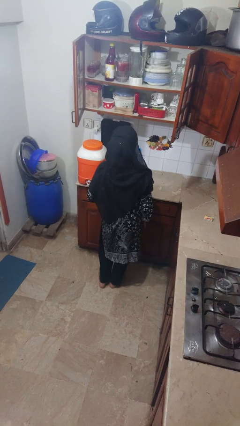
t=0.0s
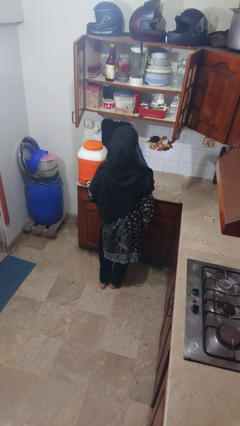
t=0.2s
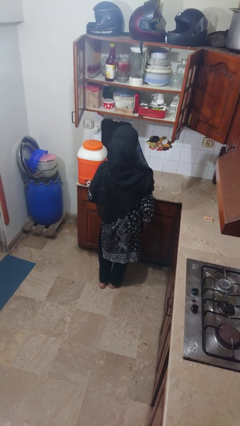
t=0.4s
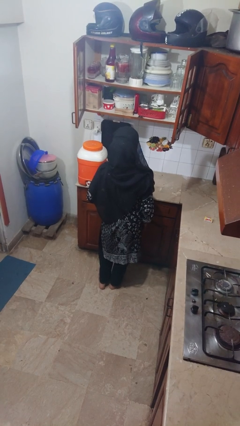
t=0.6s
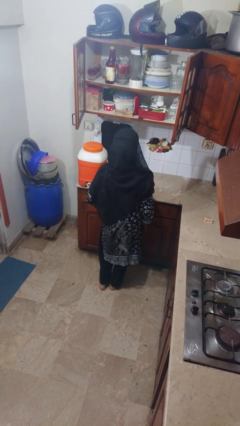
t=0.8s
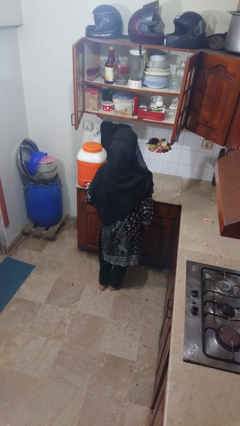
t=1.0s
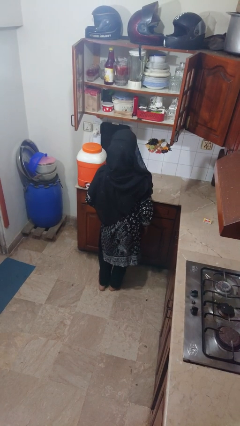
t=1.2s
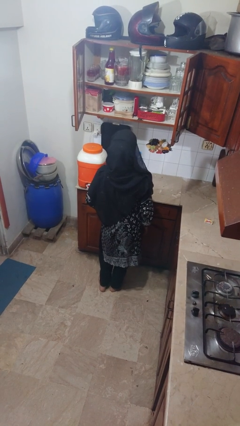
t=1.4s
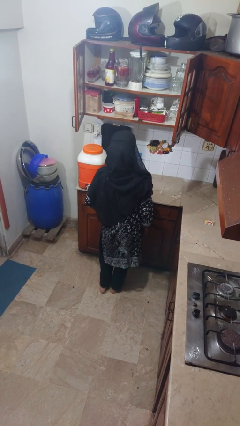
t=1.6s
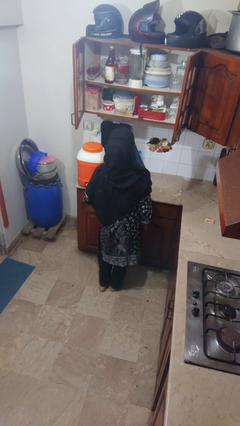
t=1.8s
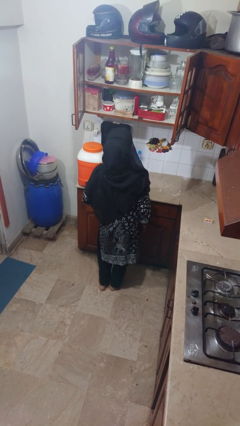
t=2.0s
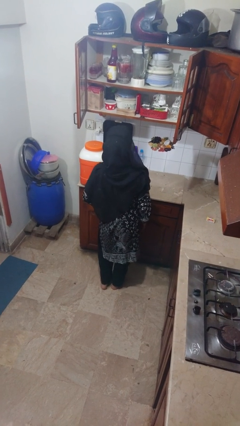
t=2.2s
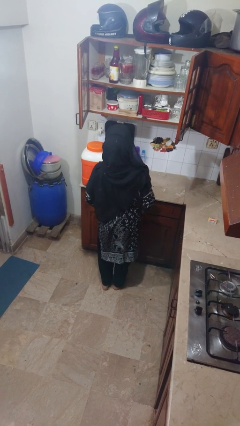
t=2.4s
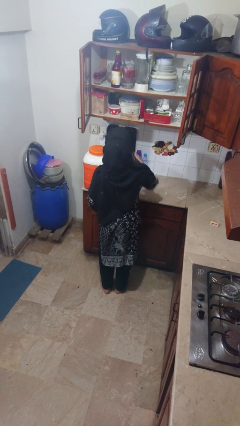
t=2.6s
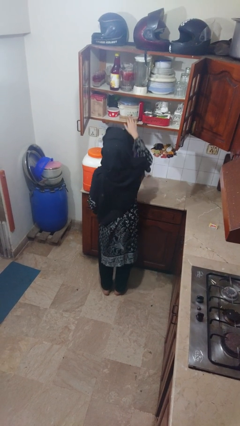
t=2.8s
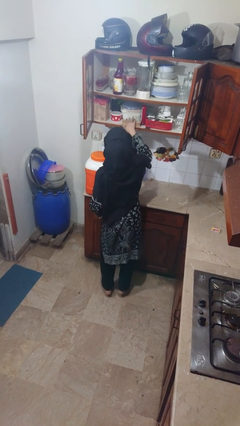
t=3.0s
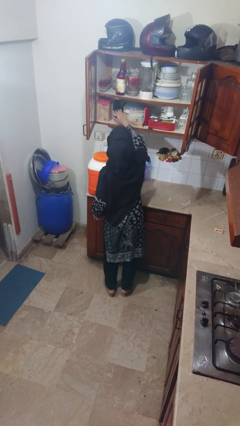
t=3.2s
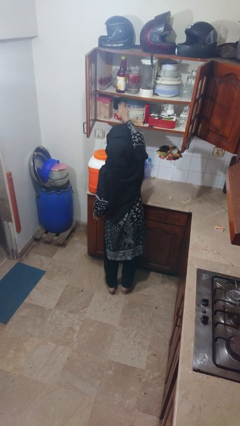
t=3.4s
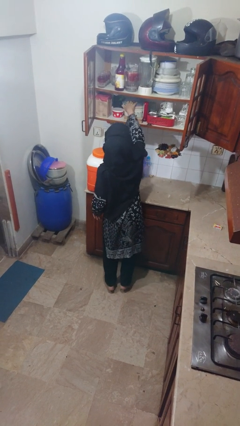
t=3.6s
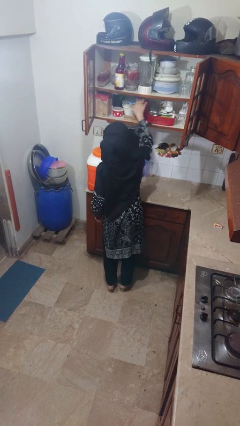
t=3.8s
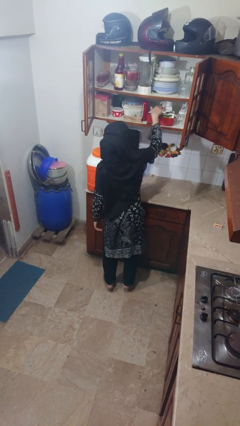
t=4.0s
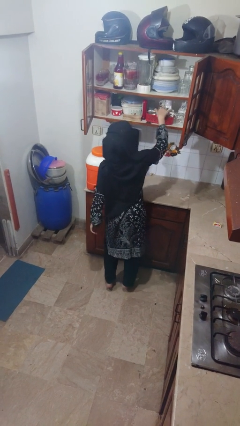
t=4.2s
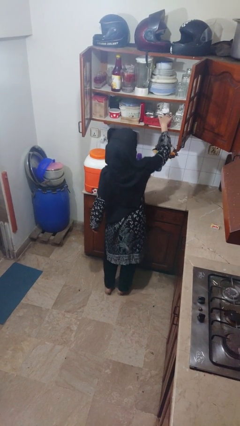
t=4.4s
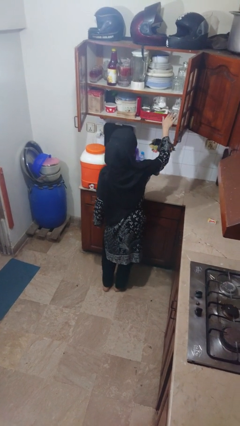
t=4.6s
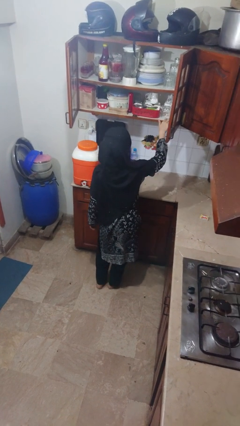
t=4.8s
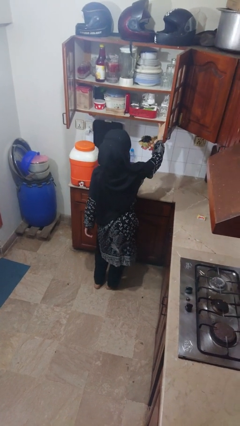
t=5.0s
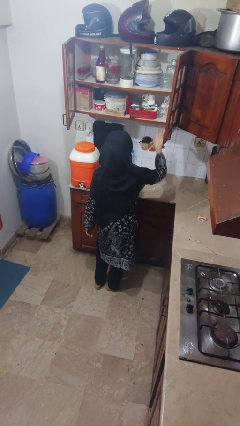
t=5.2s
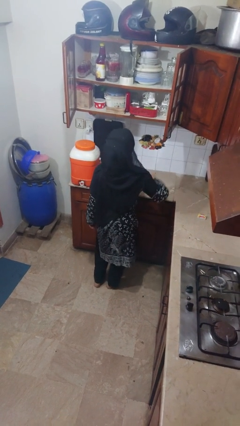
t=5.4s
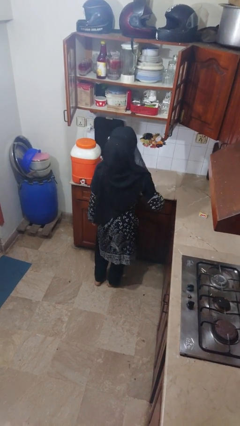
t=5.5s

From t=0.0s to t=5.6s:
person searches in cabinet

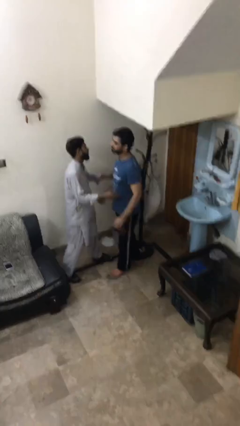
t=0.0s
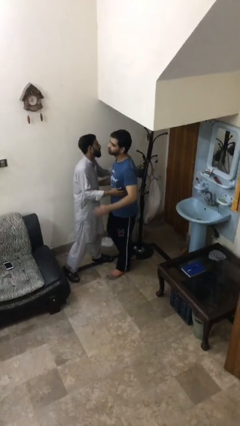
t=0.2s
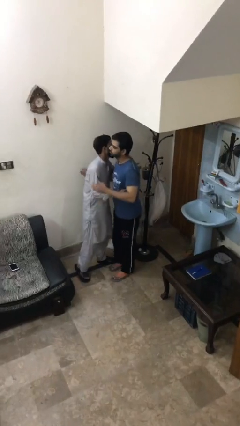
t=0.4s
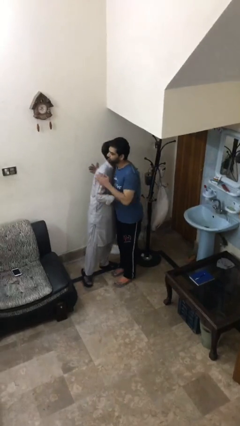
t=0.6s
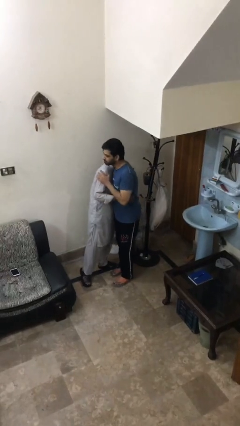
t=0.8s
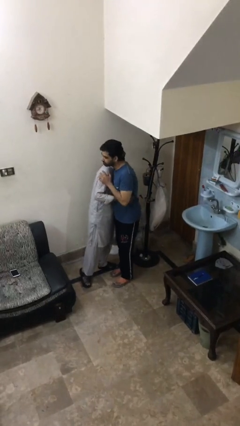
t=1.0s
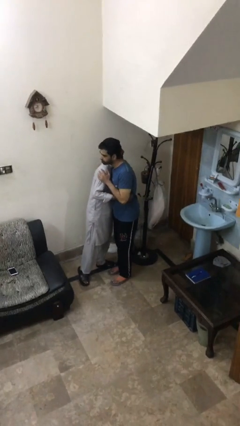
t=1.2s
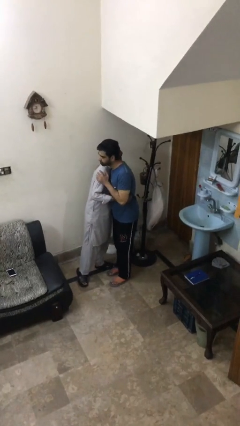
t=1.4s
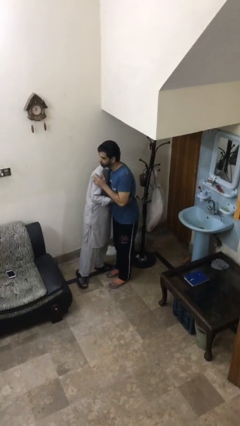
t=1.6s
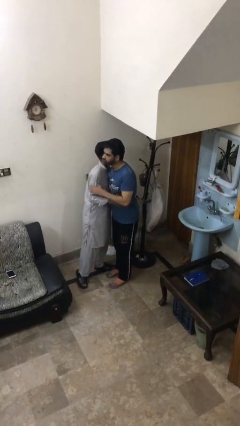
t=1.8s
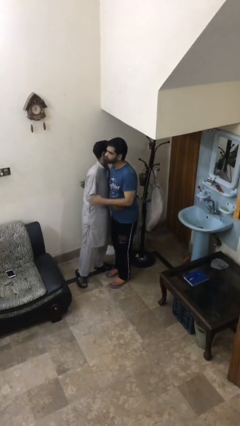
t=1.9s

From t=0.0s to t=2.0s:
person embraces person

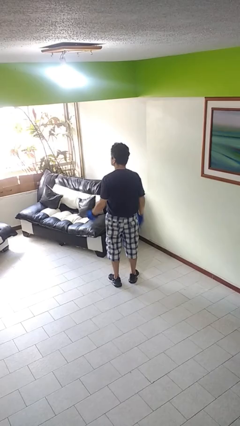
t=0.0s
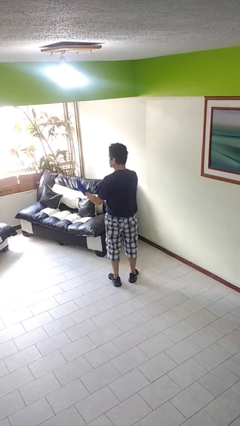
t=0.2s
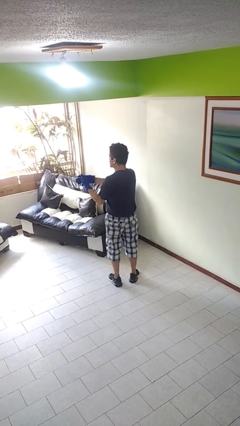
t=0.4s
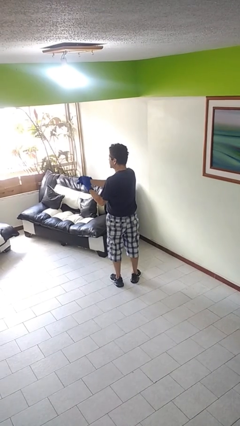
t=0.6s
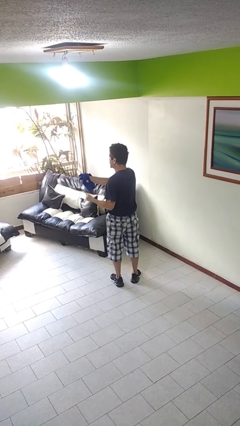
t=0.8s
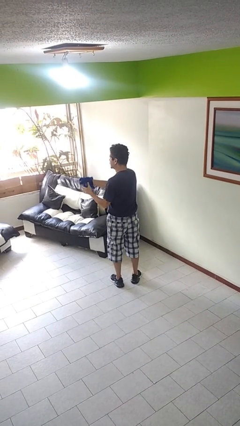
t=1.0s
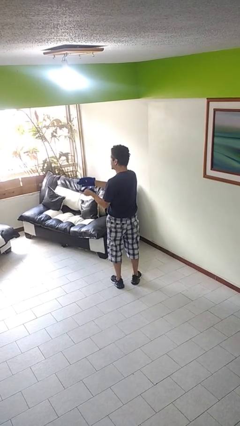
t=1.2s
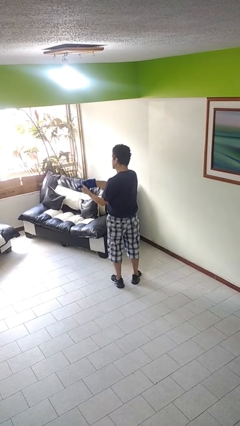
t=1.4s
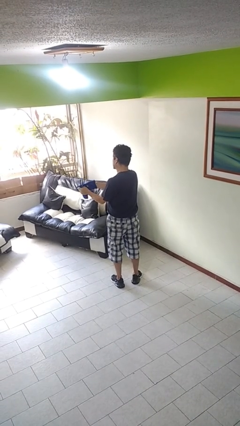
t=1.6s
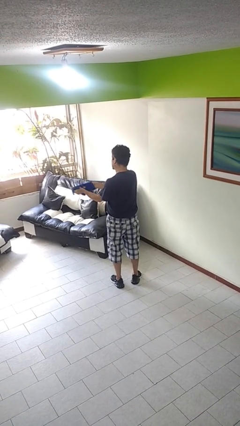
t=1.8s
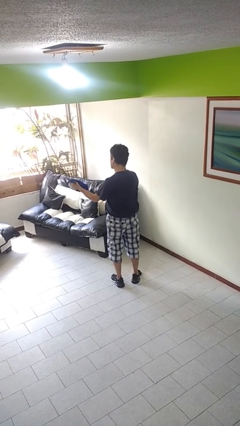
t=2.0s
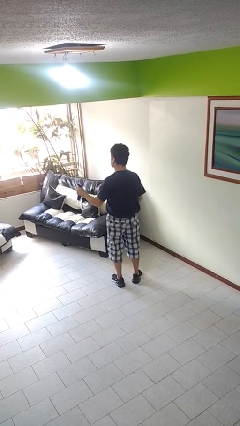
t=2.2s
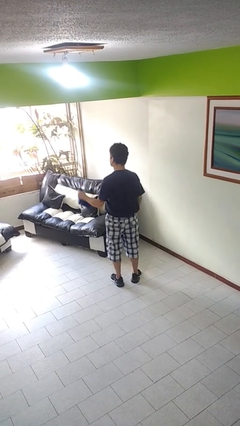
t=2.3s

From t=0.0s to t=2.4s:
person takes off gloves

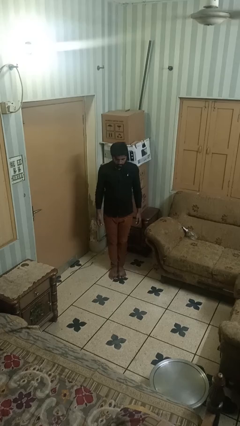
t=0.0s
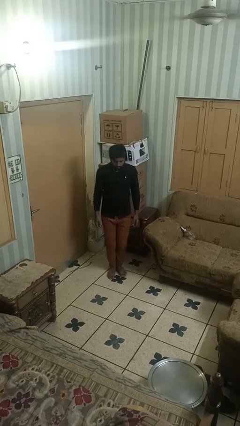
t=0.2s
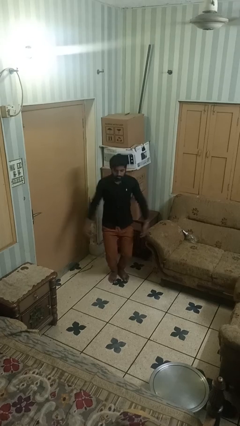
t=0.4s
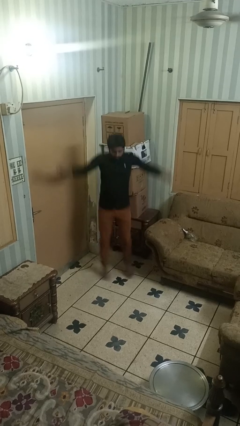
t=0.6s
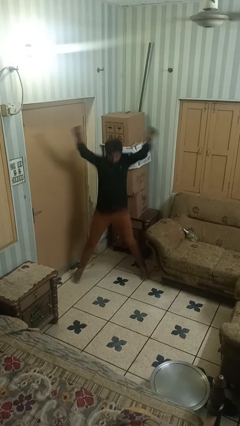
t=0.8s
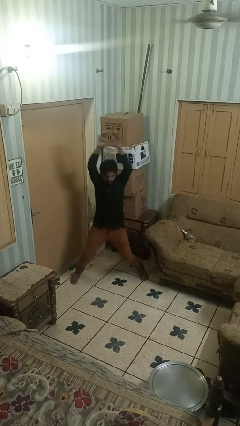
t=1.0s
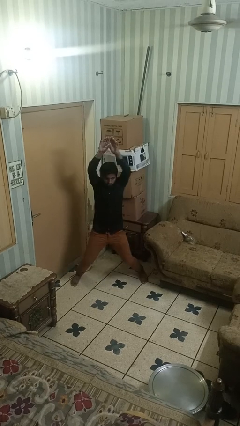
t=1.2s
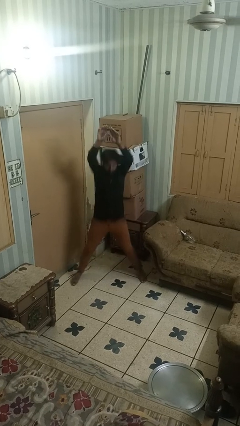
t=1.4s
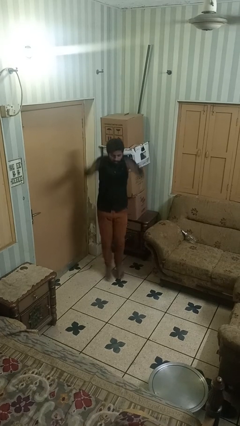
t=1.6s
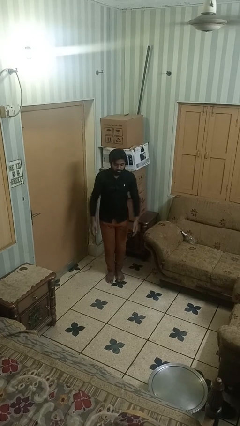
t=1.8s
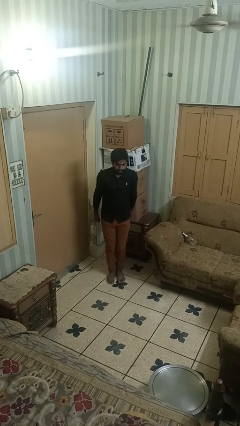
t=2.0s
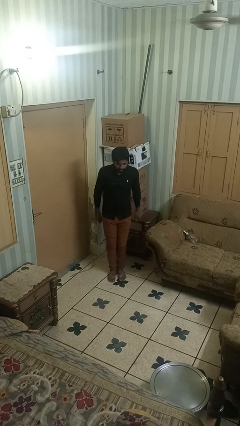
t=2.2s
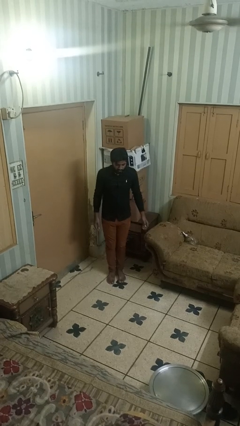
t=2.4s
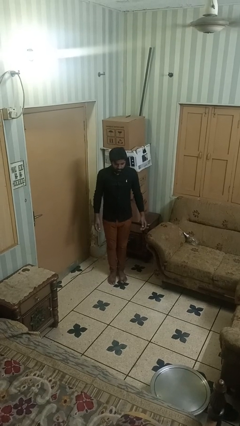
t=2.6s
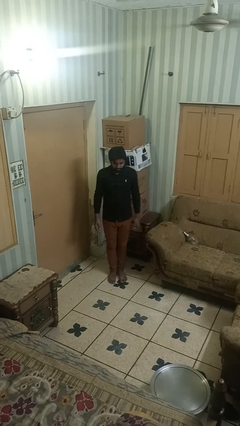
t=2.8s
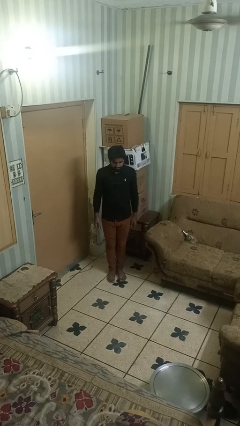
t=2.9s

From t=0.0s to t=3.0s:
person exercises with jumping jacks

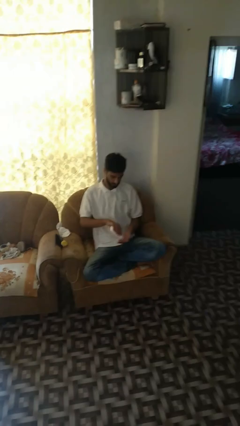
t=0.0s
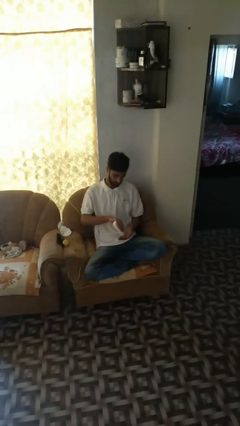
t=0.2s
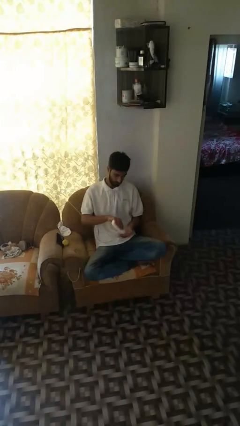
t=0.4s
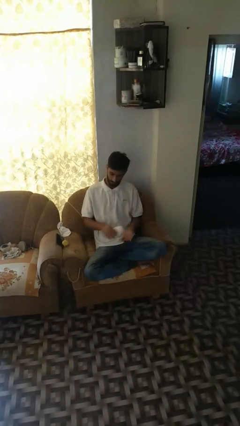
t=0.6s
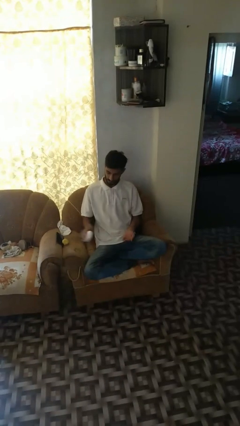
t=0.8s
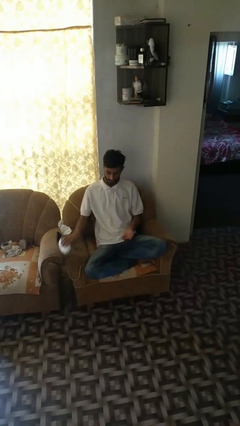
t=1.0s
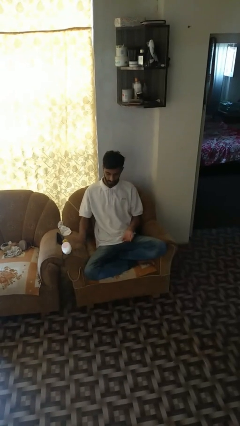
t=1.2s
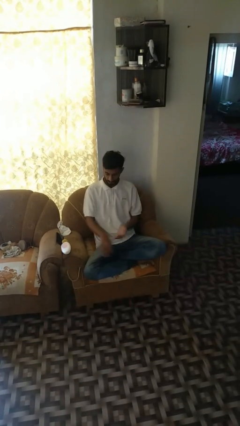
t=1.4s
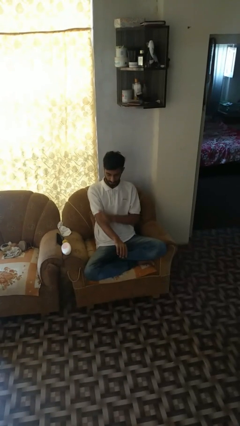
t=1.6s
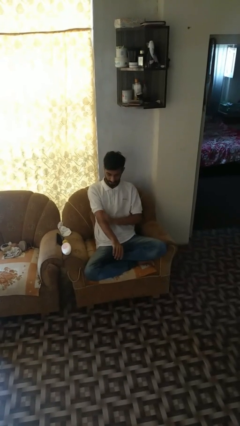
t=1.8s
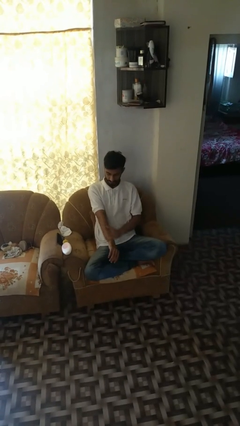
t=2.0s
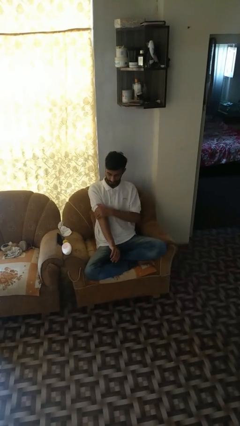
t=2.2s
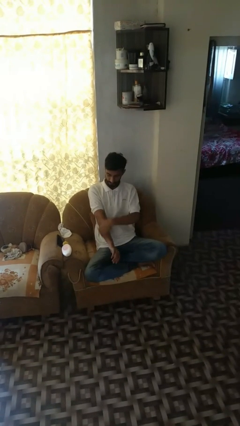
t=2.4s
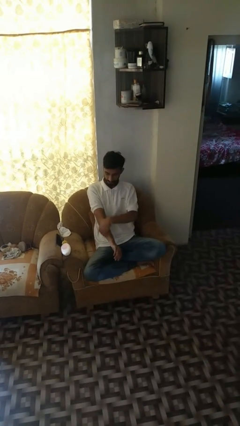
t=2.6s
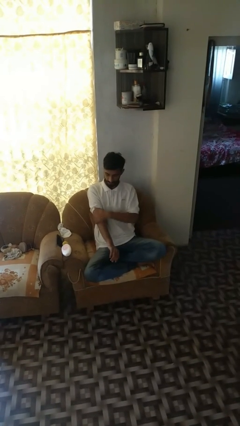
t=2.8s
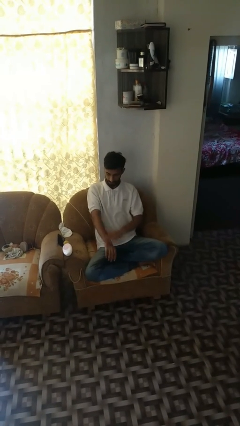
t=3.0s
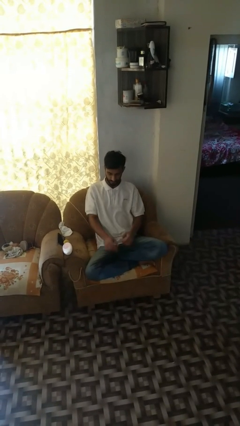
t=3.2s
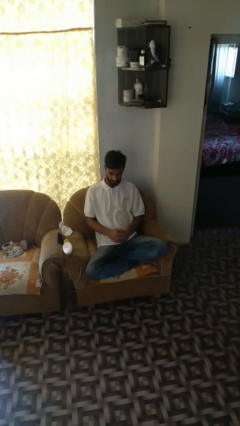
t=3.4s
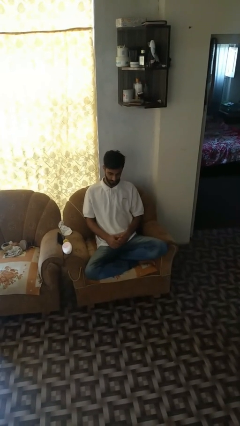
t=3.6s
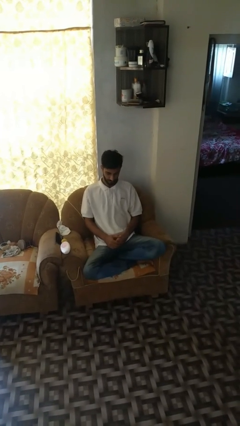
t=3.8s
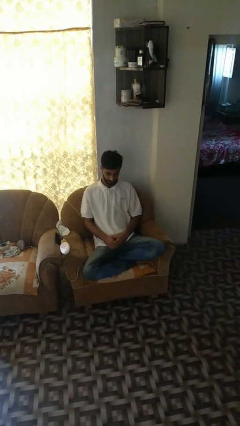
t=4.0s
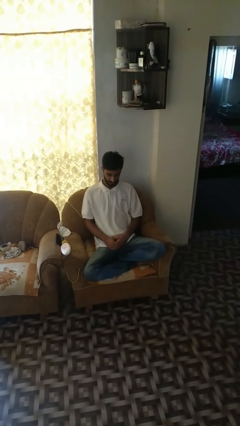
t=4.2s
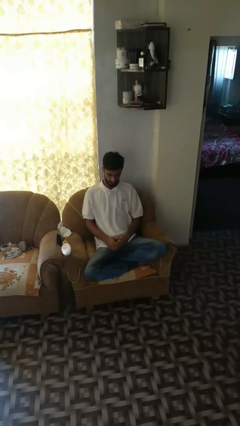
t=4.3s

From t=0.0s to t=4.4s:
person applies sunscreen
